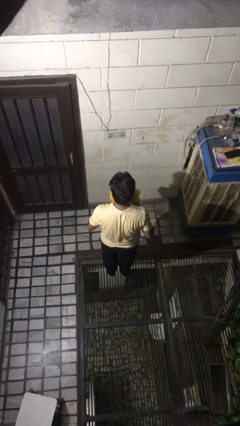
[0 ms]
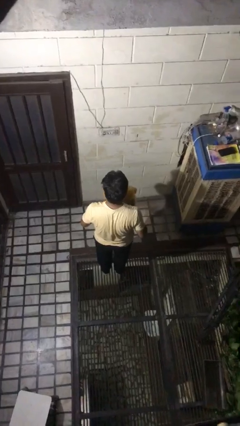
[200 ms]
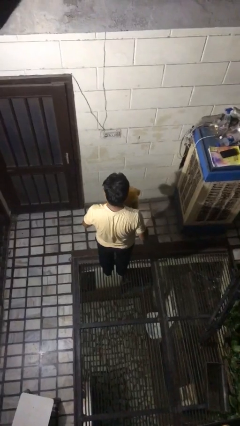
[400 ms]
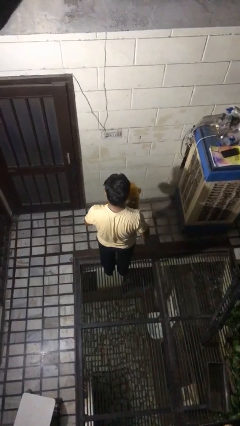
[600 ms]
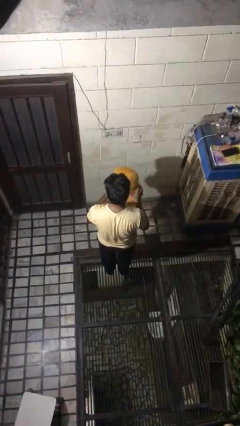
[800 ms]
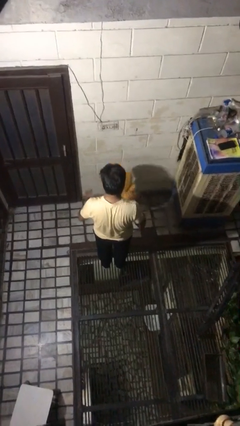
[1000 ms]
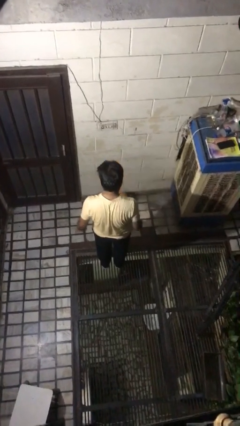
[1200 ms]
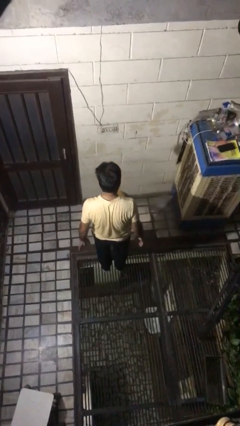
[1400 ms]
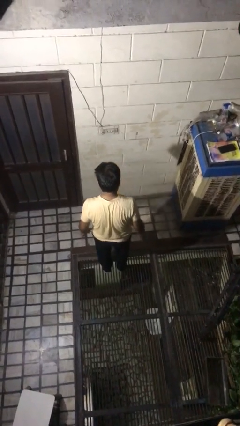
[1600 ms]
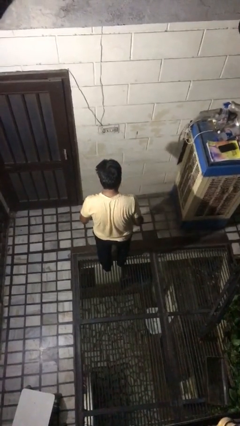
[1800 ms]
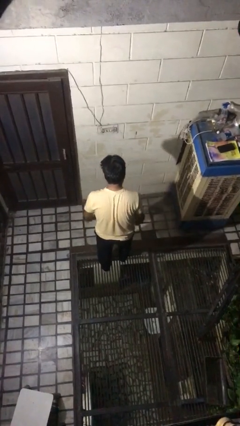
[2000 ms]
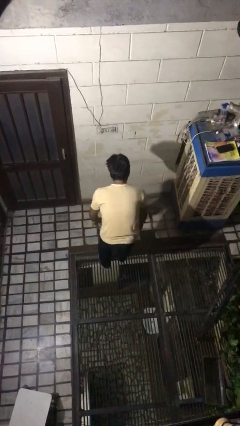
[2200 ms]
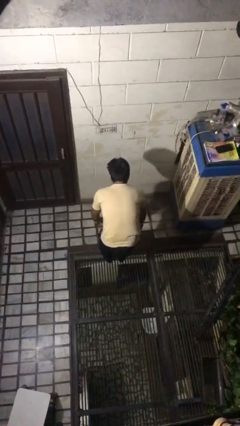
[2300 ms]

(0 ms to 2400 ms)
person throws object into air

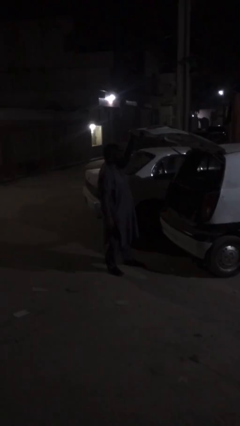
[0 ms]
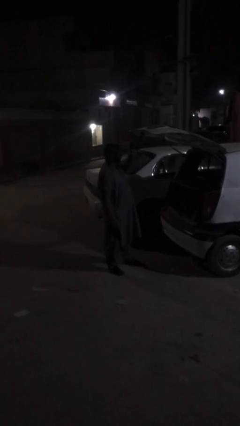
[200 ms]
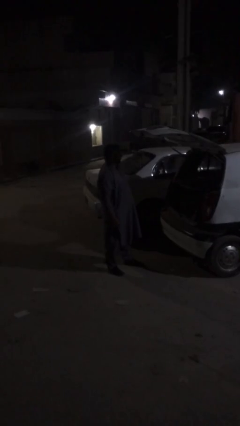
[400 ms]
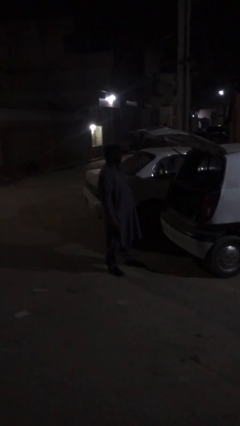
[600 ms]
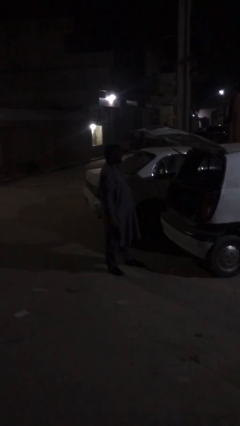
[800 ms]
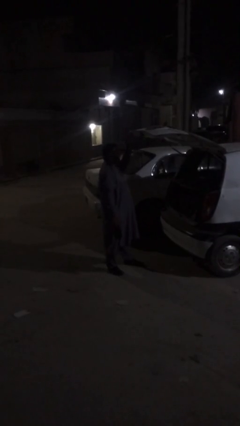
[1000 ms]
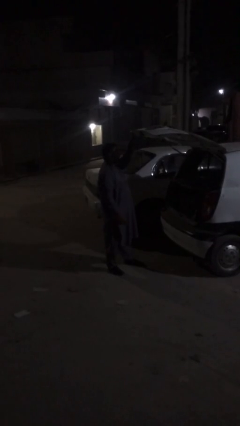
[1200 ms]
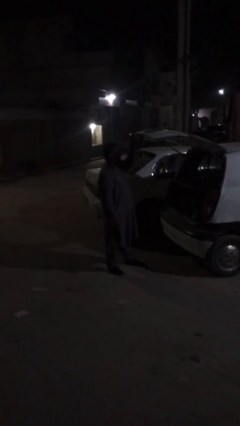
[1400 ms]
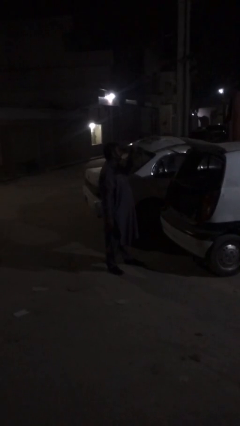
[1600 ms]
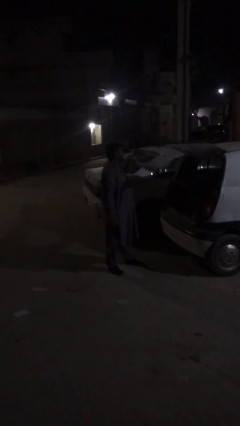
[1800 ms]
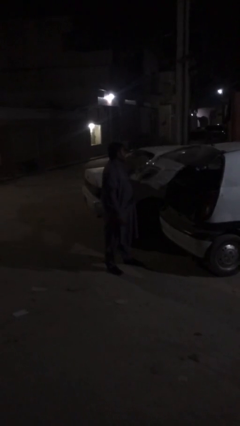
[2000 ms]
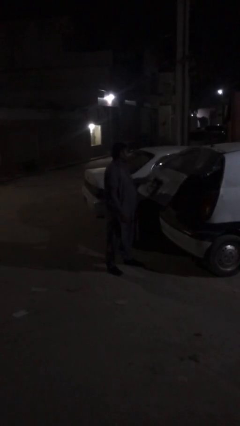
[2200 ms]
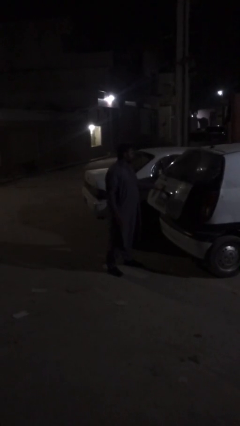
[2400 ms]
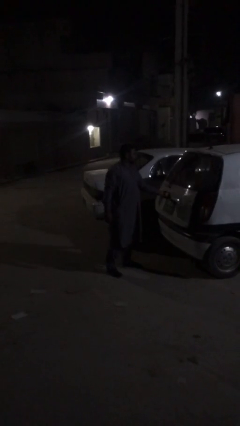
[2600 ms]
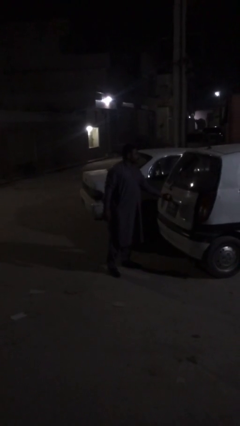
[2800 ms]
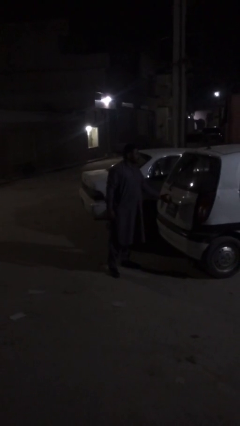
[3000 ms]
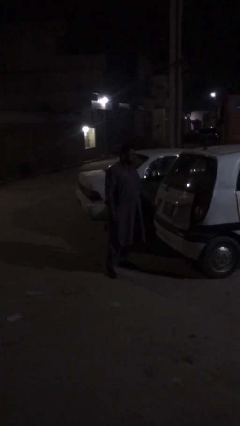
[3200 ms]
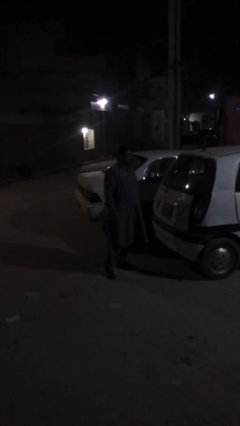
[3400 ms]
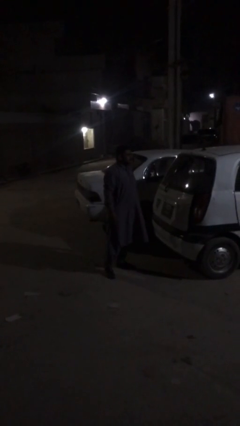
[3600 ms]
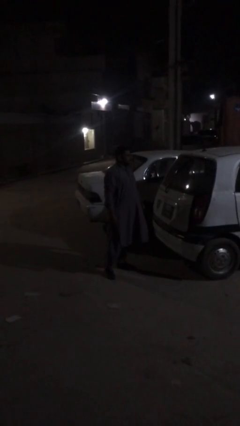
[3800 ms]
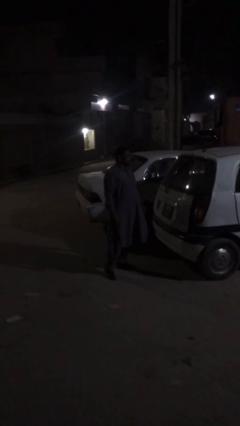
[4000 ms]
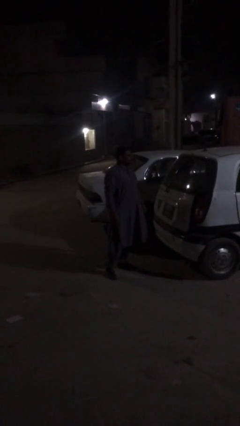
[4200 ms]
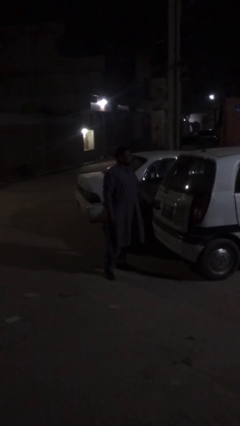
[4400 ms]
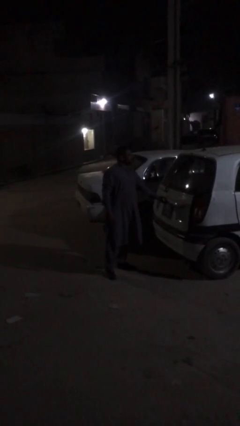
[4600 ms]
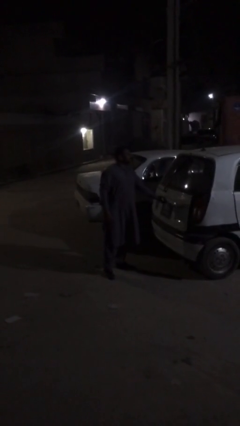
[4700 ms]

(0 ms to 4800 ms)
person closes car trunk

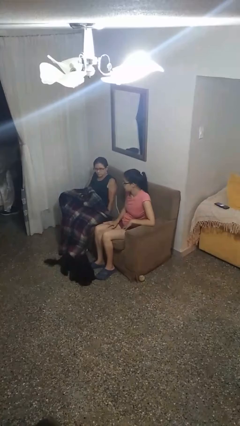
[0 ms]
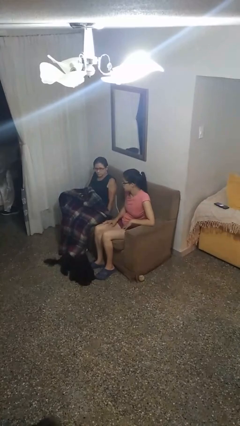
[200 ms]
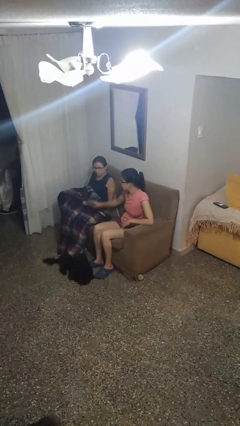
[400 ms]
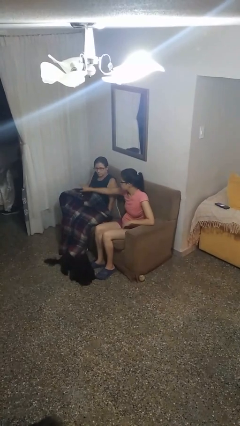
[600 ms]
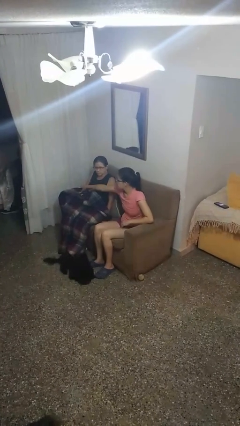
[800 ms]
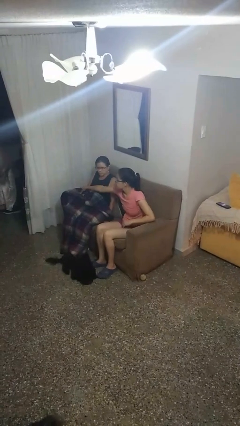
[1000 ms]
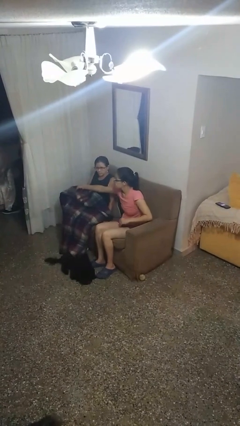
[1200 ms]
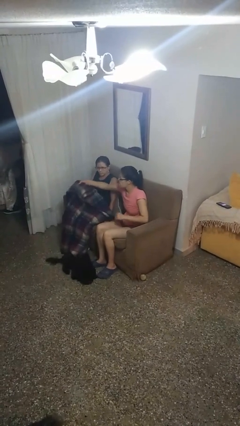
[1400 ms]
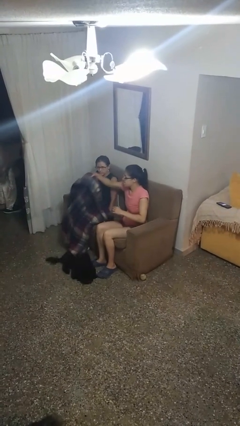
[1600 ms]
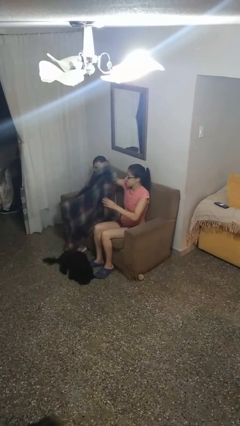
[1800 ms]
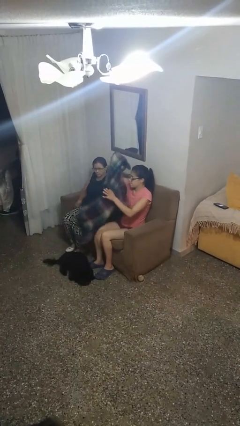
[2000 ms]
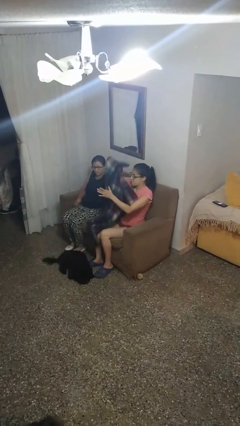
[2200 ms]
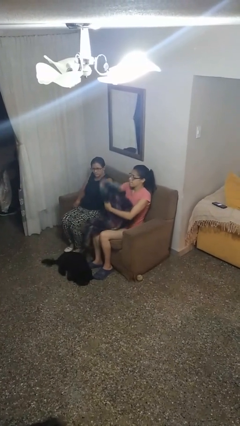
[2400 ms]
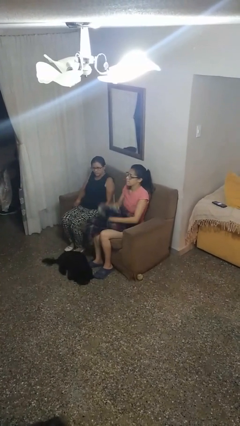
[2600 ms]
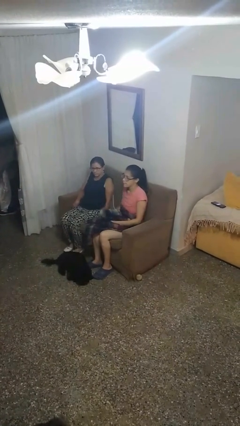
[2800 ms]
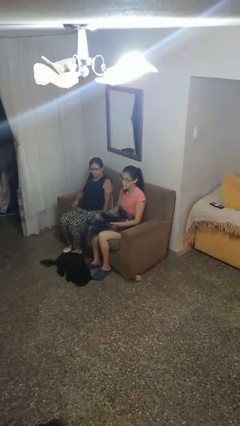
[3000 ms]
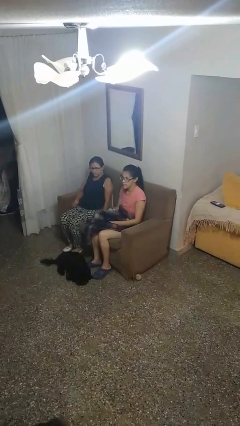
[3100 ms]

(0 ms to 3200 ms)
person uncovers friend with blanket

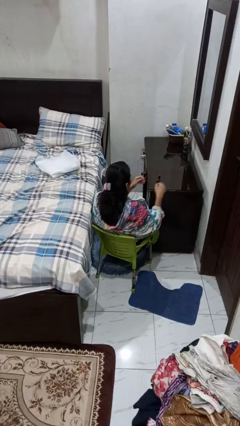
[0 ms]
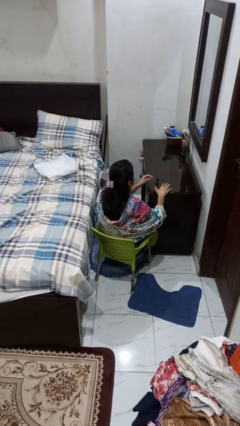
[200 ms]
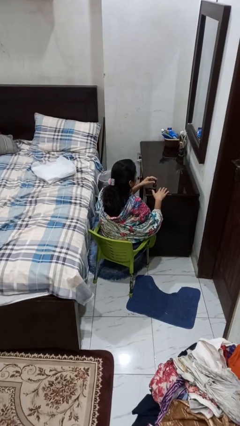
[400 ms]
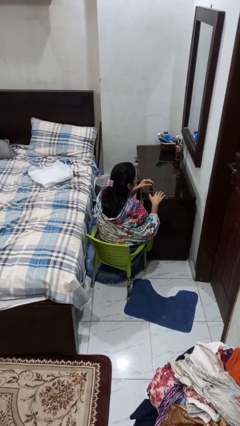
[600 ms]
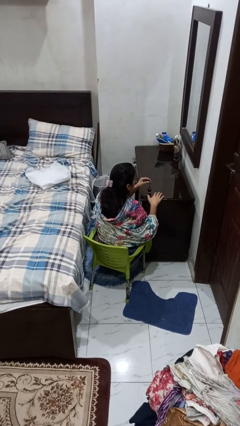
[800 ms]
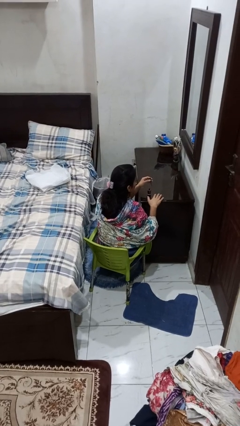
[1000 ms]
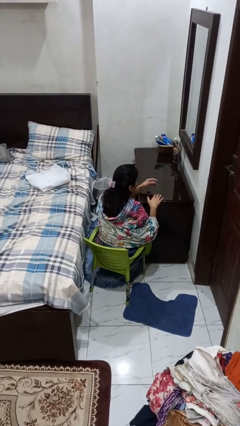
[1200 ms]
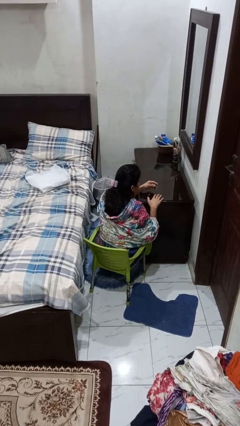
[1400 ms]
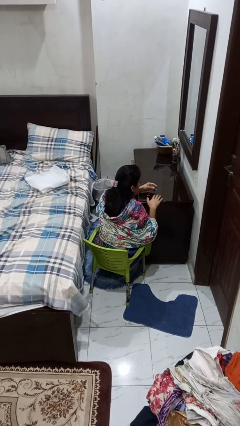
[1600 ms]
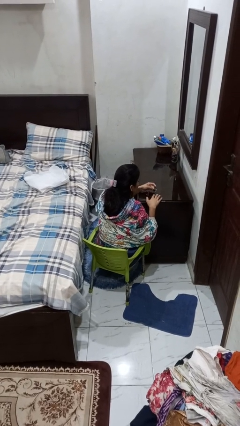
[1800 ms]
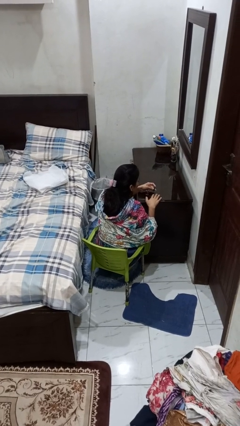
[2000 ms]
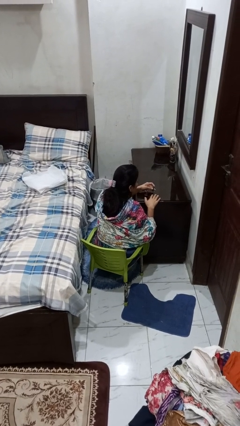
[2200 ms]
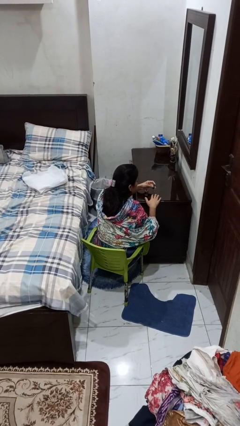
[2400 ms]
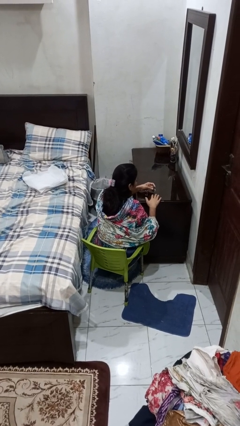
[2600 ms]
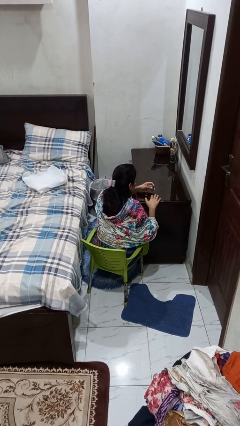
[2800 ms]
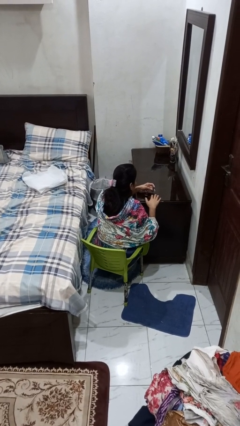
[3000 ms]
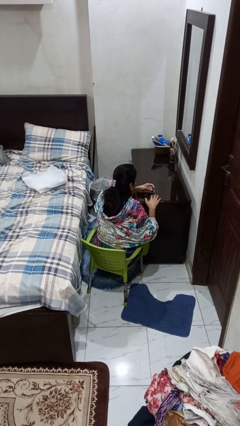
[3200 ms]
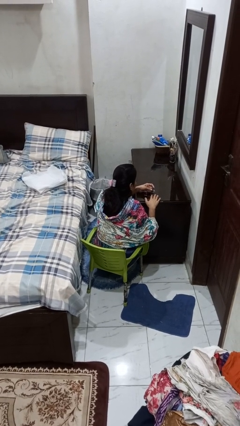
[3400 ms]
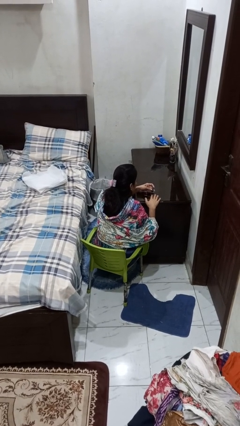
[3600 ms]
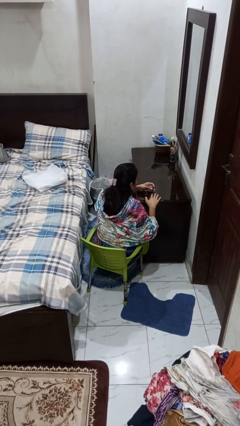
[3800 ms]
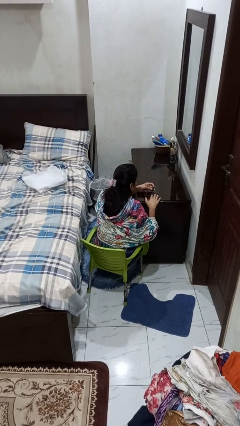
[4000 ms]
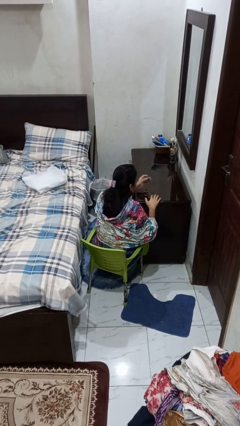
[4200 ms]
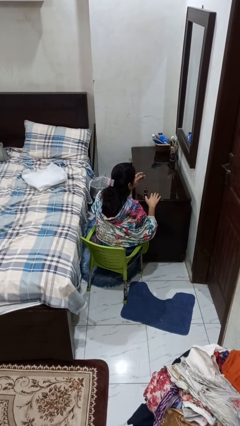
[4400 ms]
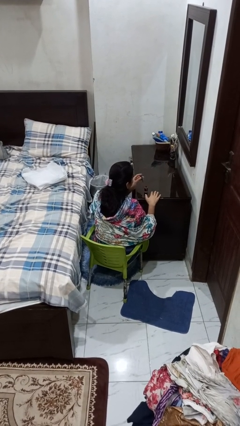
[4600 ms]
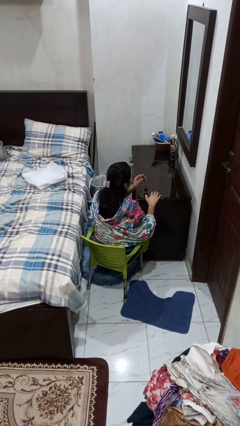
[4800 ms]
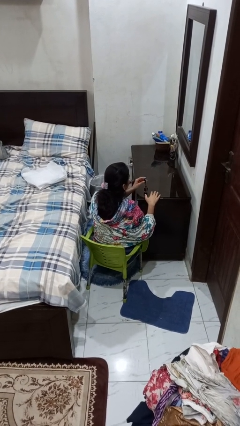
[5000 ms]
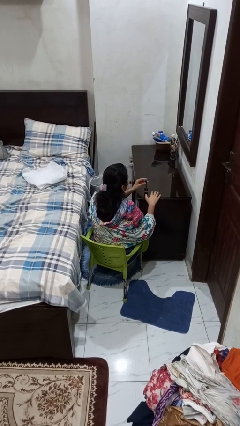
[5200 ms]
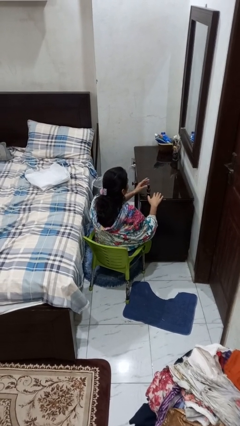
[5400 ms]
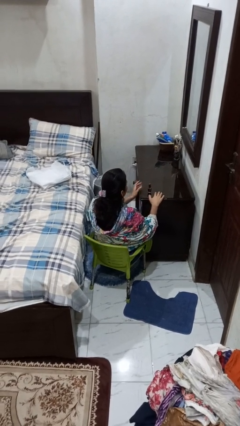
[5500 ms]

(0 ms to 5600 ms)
person paints fingernails

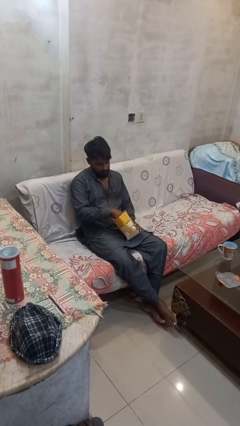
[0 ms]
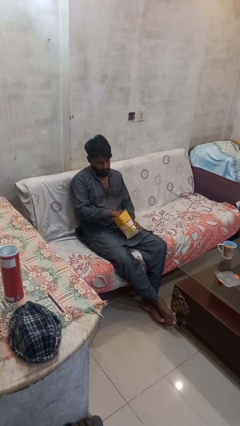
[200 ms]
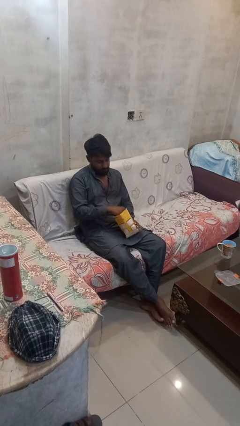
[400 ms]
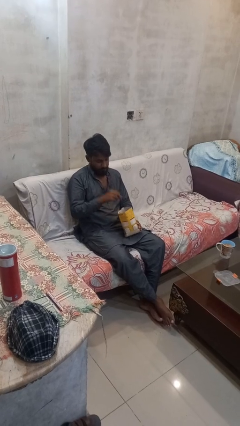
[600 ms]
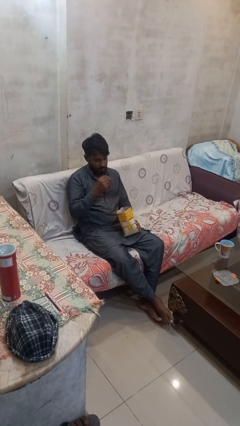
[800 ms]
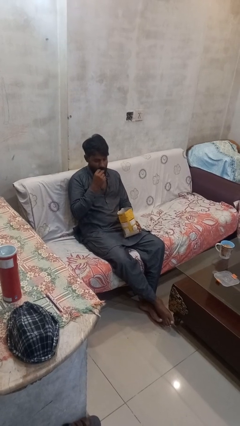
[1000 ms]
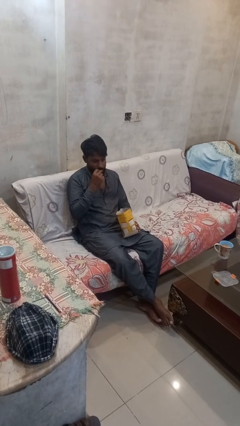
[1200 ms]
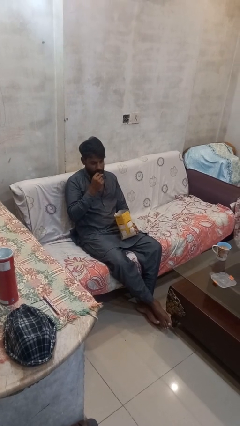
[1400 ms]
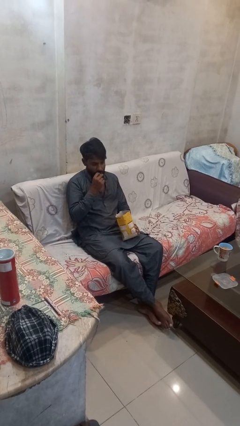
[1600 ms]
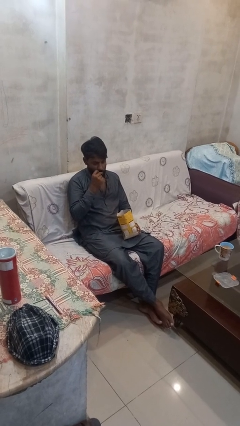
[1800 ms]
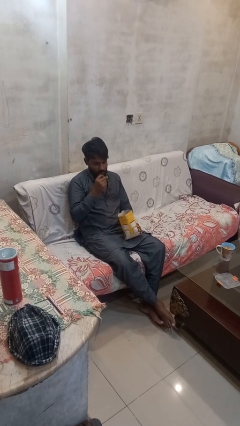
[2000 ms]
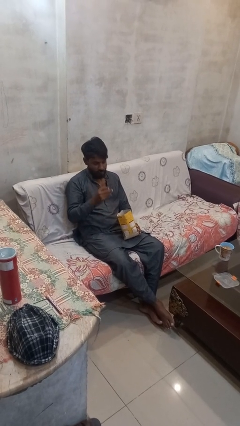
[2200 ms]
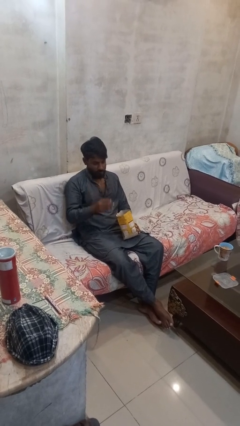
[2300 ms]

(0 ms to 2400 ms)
person eats snack from bag
